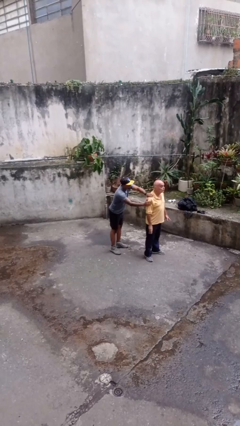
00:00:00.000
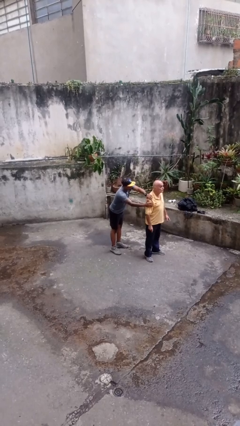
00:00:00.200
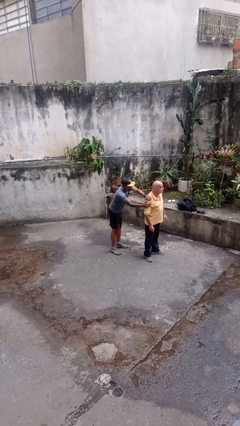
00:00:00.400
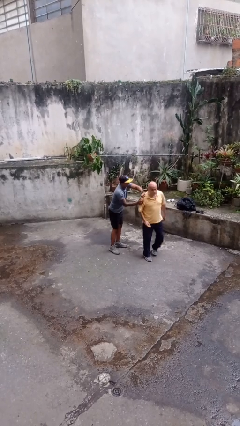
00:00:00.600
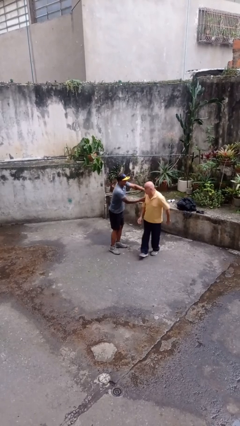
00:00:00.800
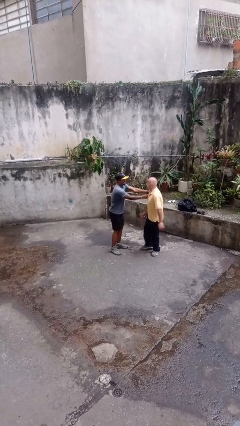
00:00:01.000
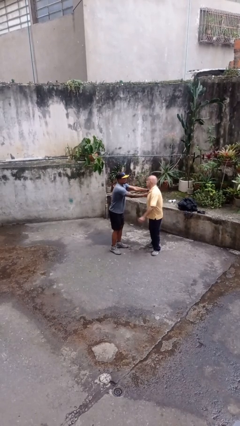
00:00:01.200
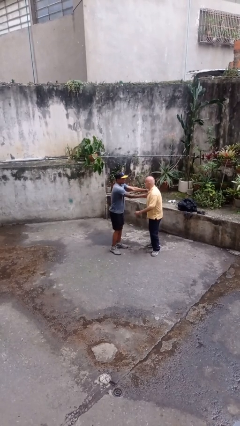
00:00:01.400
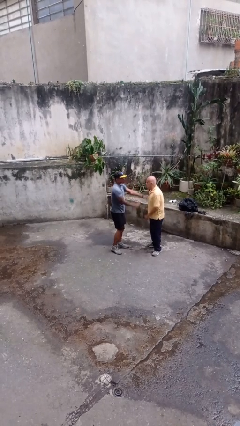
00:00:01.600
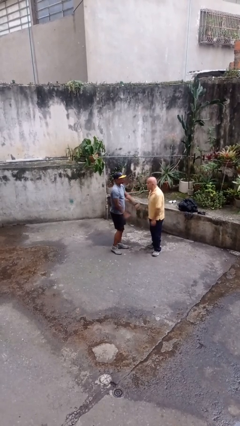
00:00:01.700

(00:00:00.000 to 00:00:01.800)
person spins person around

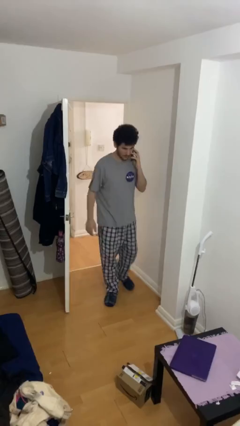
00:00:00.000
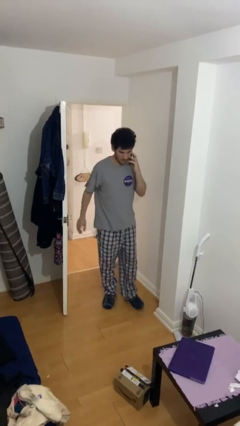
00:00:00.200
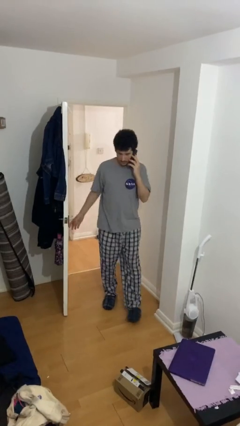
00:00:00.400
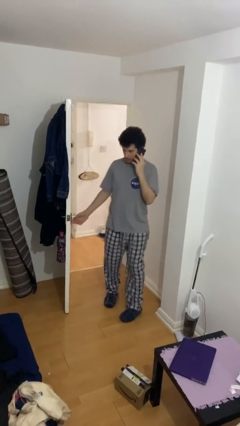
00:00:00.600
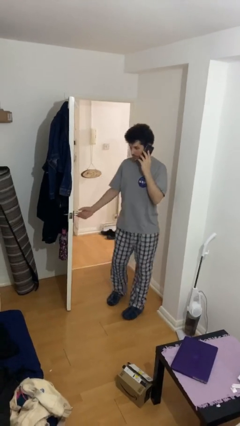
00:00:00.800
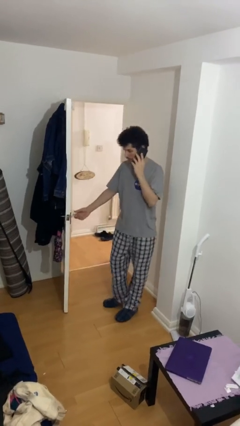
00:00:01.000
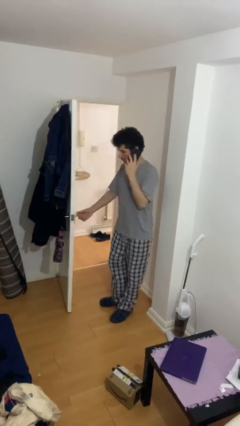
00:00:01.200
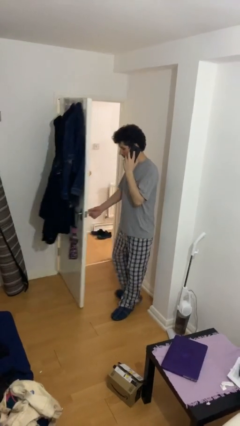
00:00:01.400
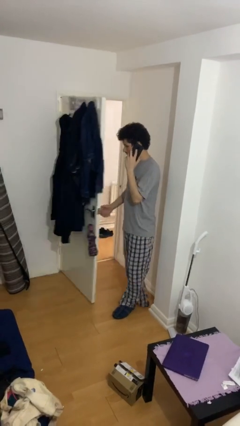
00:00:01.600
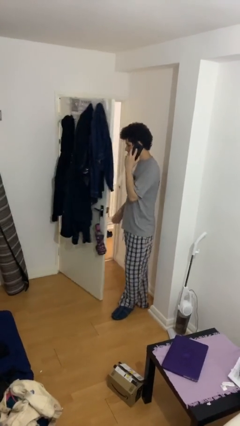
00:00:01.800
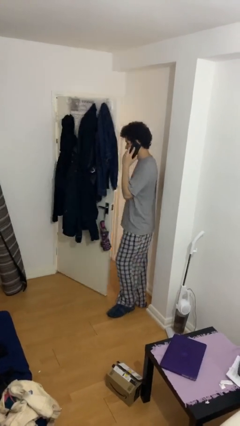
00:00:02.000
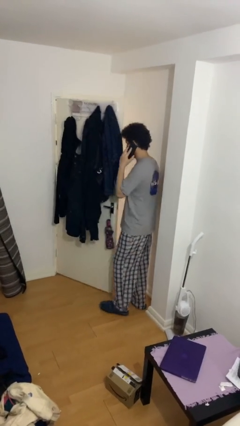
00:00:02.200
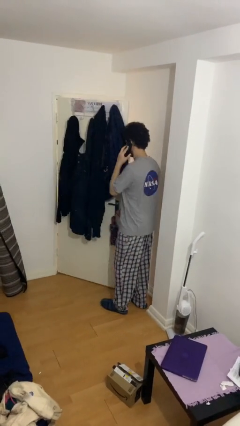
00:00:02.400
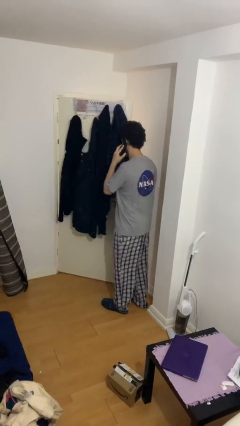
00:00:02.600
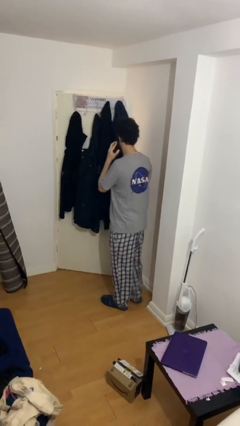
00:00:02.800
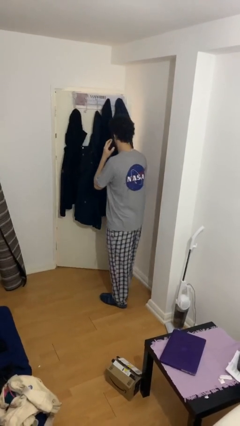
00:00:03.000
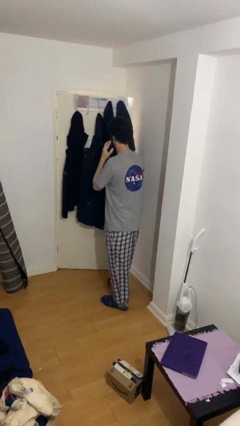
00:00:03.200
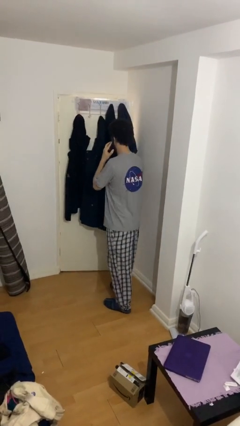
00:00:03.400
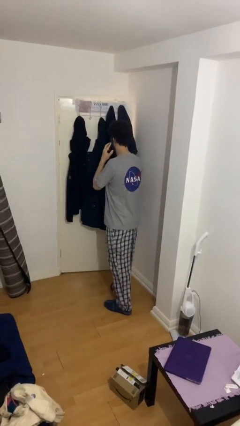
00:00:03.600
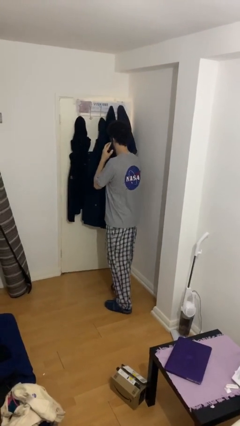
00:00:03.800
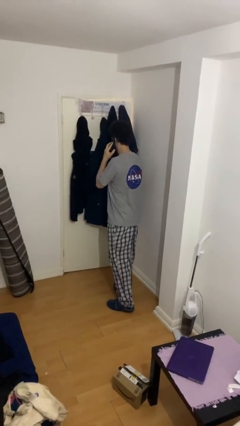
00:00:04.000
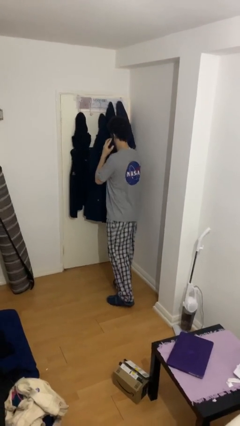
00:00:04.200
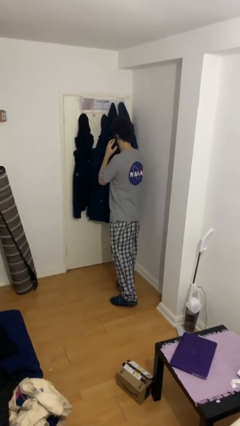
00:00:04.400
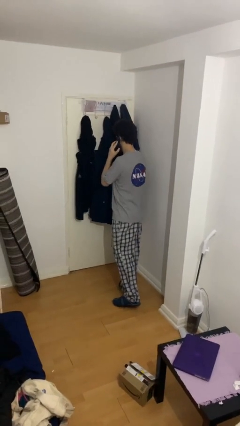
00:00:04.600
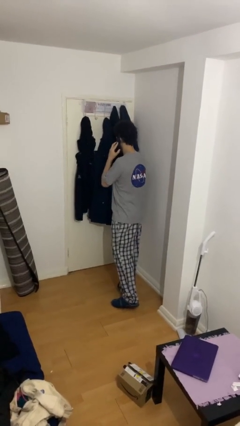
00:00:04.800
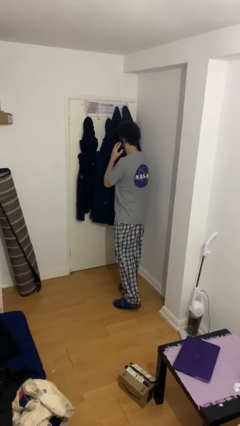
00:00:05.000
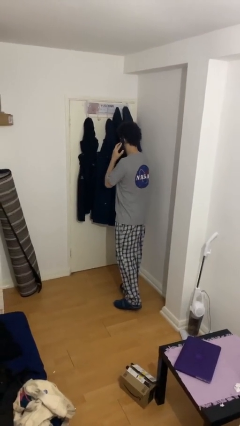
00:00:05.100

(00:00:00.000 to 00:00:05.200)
person closes facility door

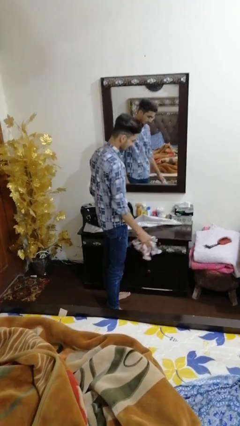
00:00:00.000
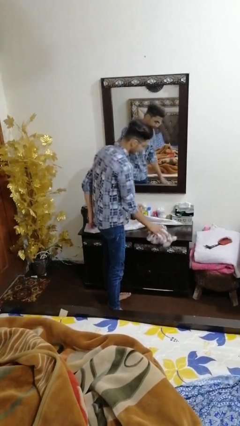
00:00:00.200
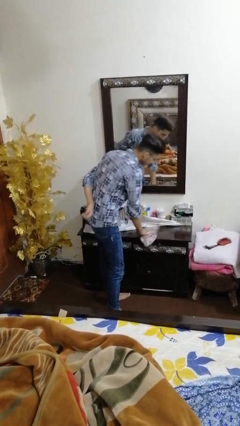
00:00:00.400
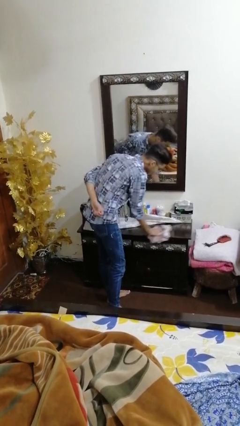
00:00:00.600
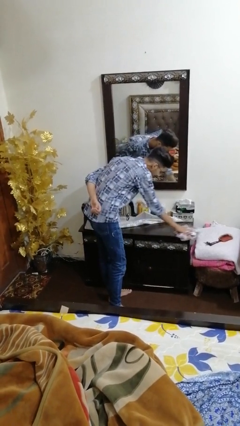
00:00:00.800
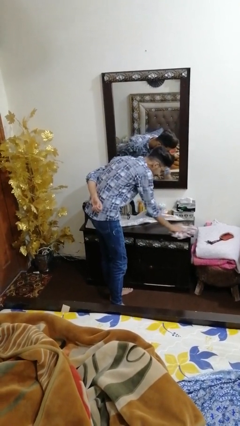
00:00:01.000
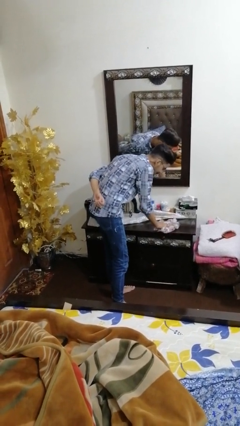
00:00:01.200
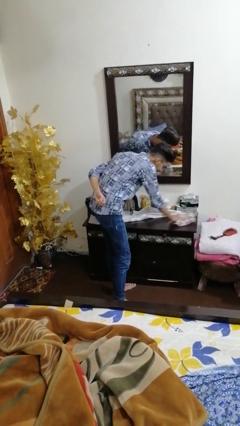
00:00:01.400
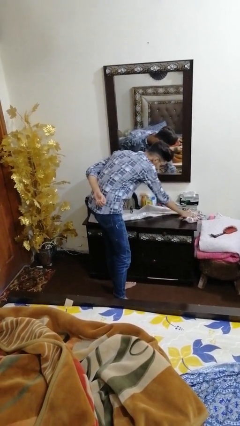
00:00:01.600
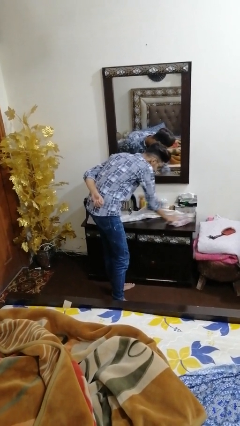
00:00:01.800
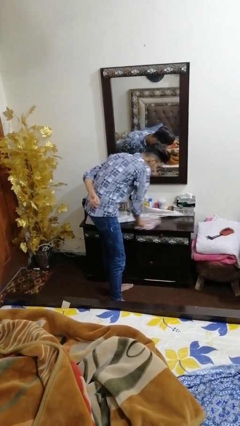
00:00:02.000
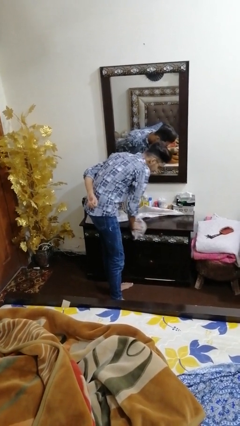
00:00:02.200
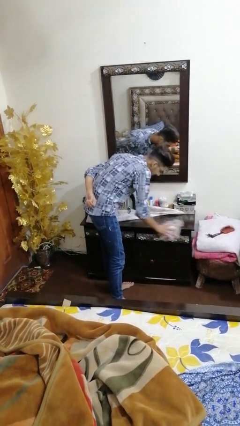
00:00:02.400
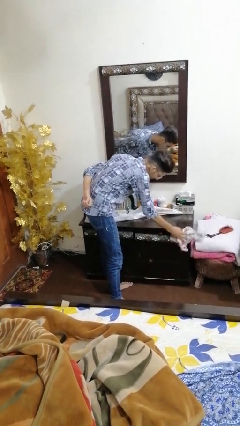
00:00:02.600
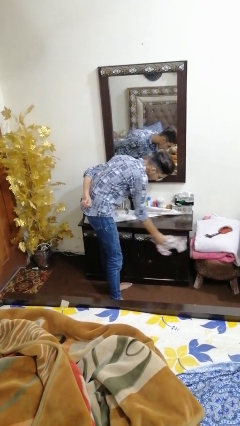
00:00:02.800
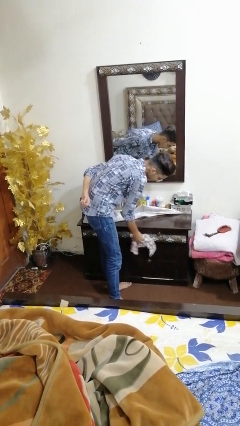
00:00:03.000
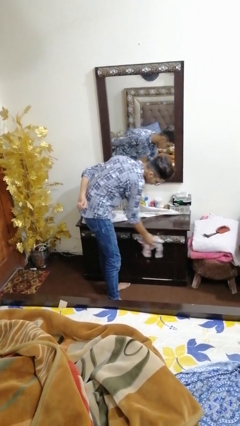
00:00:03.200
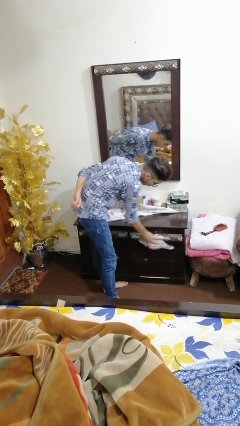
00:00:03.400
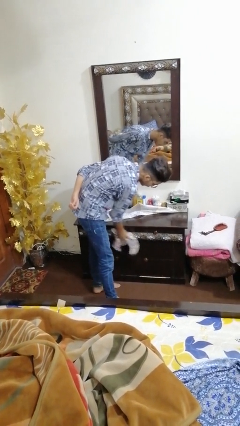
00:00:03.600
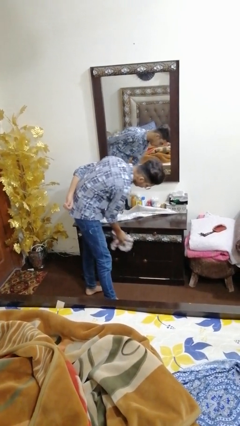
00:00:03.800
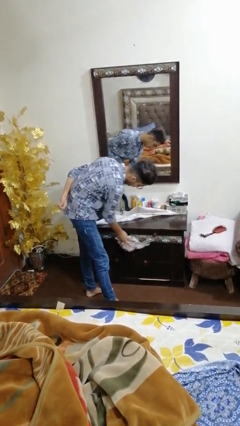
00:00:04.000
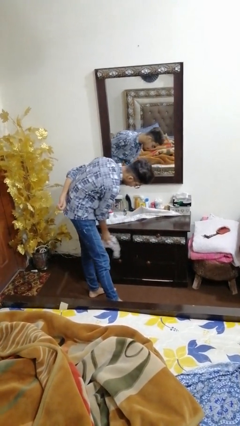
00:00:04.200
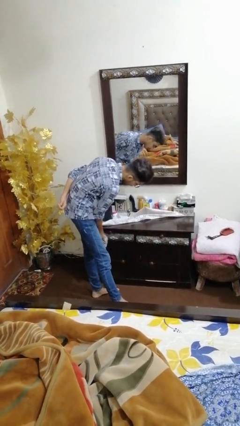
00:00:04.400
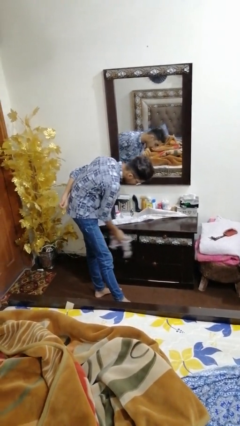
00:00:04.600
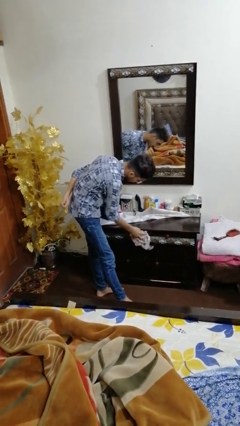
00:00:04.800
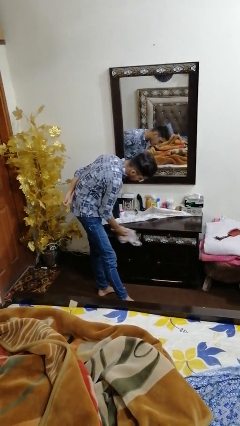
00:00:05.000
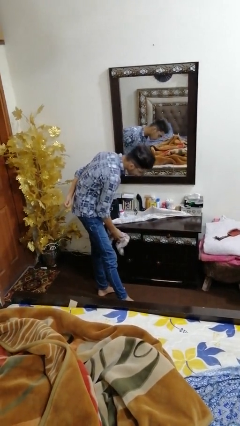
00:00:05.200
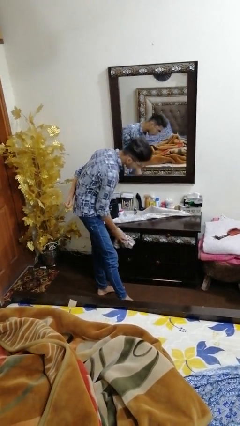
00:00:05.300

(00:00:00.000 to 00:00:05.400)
person cleans table with rag

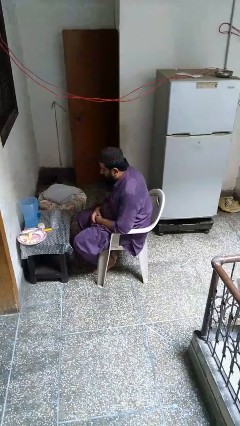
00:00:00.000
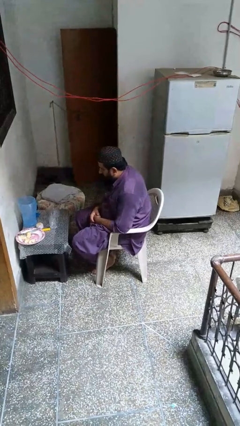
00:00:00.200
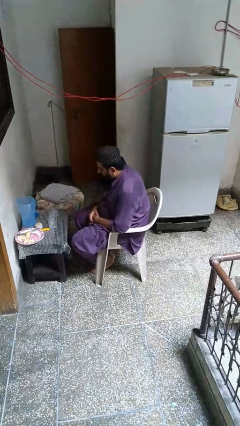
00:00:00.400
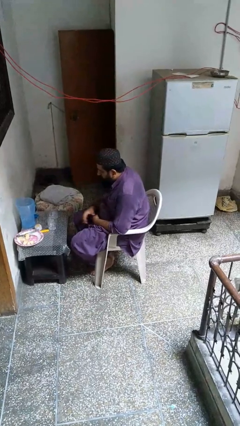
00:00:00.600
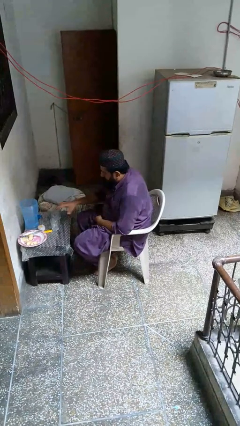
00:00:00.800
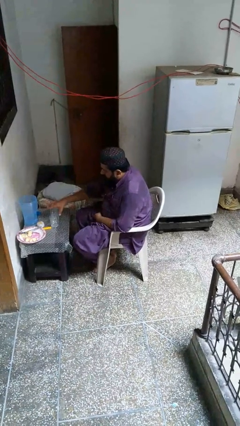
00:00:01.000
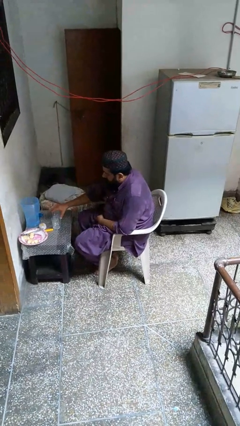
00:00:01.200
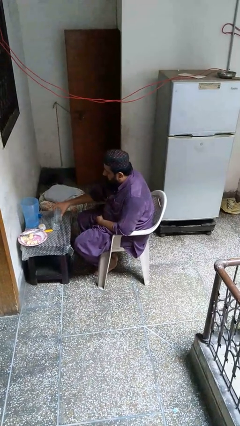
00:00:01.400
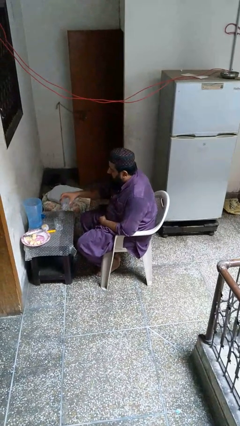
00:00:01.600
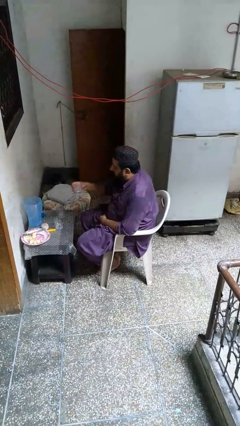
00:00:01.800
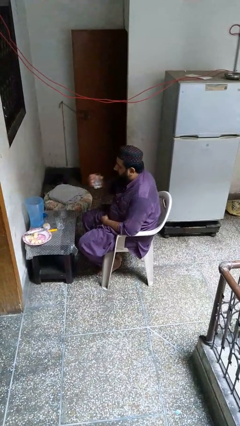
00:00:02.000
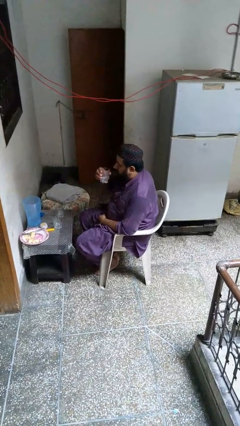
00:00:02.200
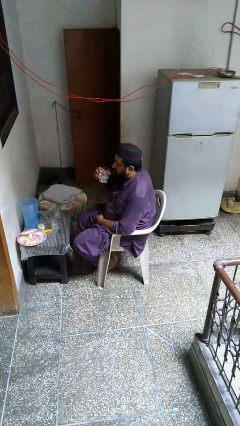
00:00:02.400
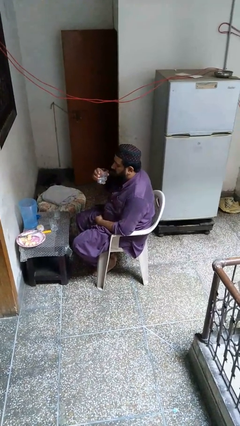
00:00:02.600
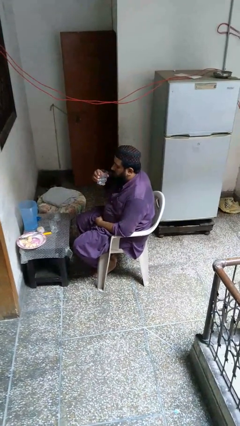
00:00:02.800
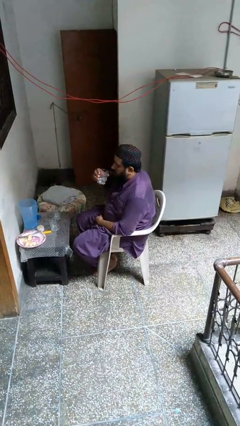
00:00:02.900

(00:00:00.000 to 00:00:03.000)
person picks up object from table

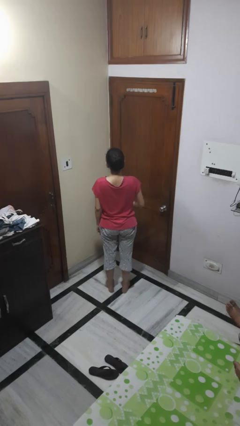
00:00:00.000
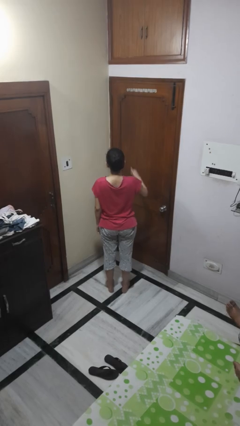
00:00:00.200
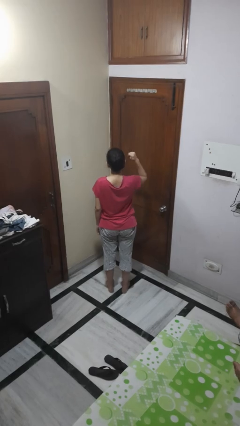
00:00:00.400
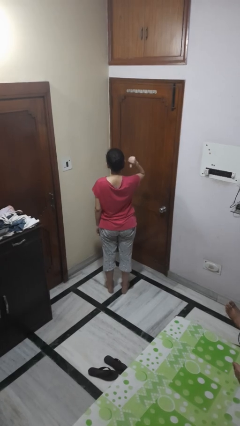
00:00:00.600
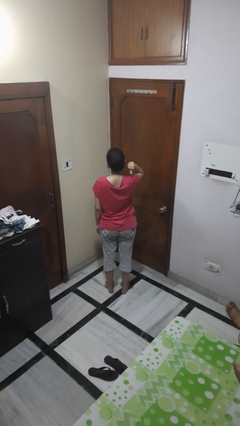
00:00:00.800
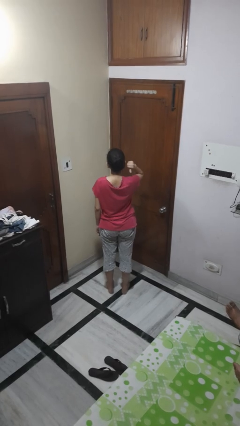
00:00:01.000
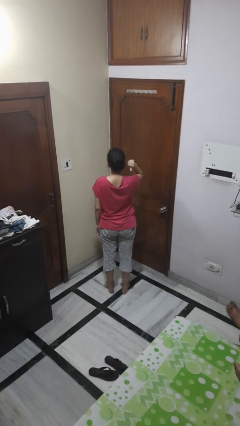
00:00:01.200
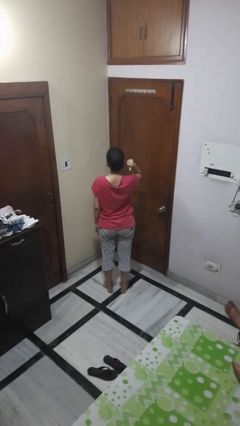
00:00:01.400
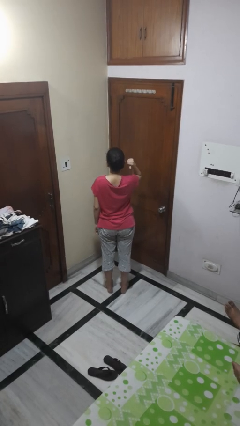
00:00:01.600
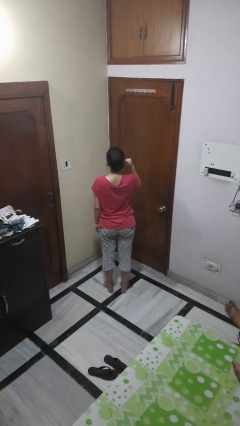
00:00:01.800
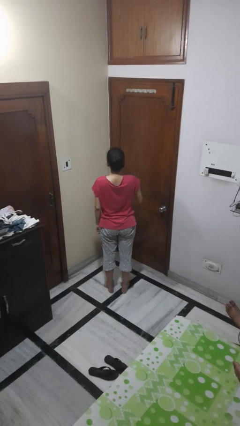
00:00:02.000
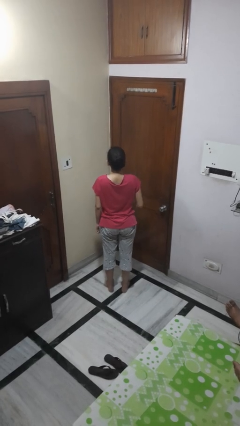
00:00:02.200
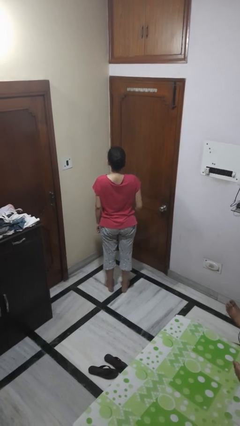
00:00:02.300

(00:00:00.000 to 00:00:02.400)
person gestures behind me
